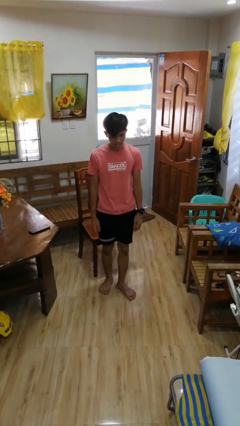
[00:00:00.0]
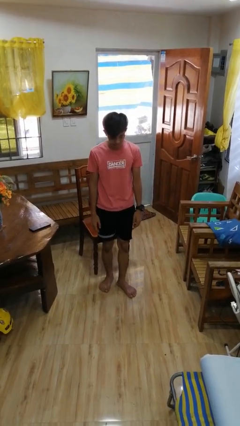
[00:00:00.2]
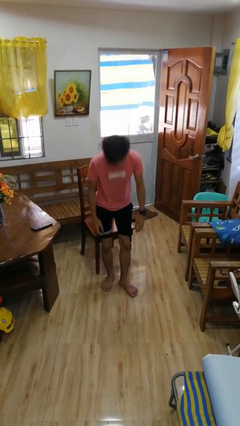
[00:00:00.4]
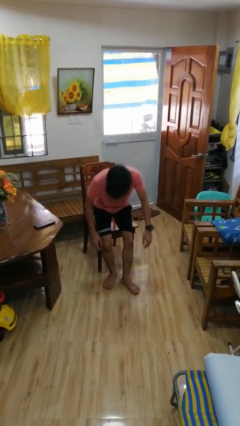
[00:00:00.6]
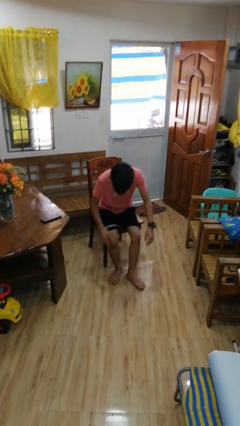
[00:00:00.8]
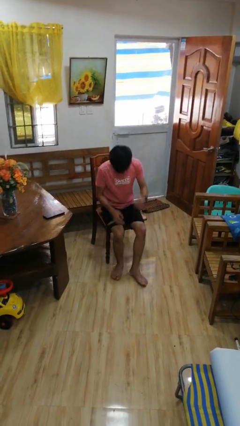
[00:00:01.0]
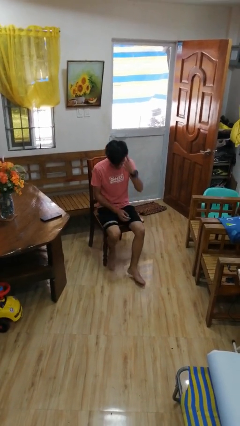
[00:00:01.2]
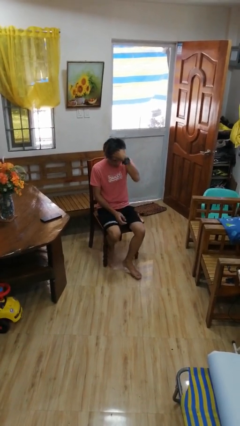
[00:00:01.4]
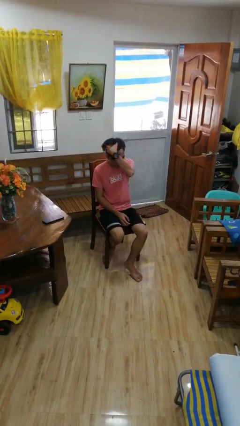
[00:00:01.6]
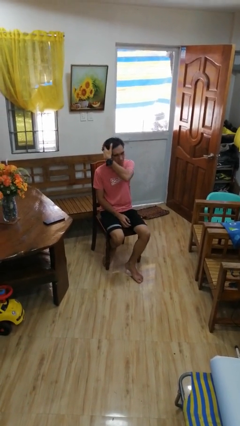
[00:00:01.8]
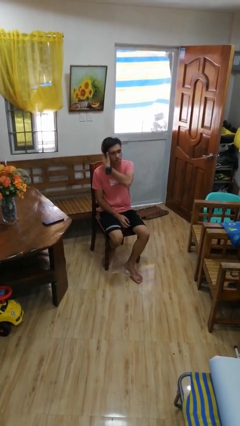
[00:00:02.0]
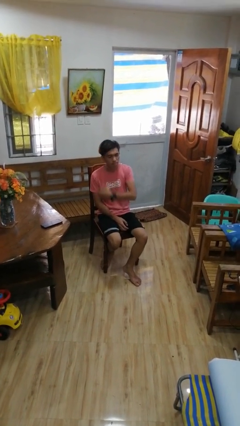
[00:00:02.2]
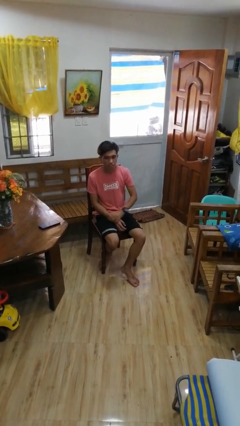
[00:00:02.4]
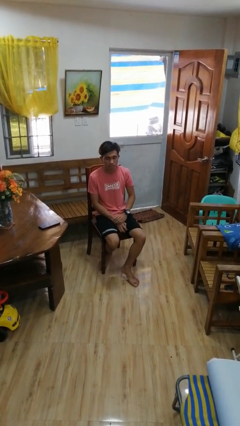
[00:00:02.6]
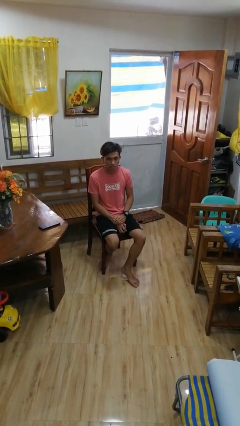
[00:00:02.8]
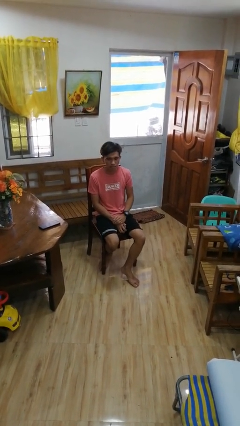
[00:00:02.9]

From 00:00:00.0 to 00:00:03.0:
person sits down

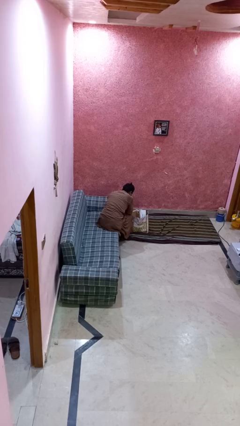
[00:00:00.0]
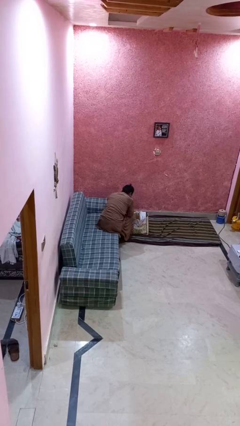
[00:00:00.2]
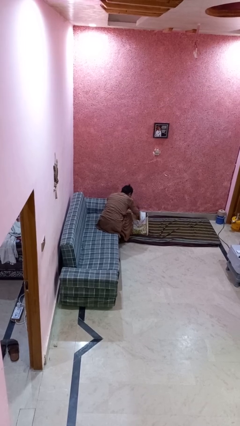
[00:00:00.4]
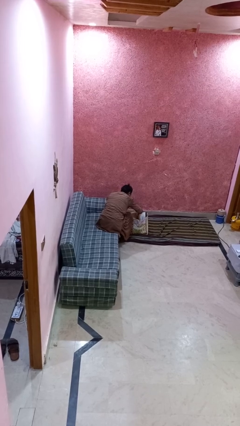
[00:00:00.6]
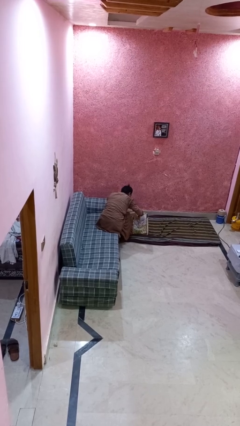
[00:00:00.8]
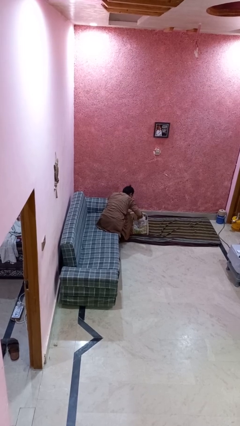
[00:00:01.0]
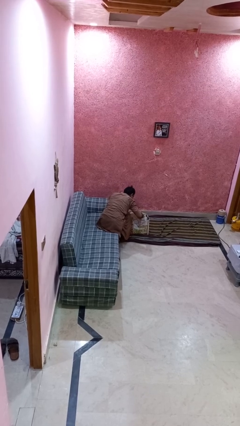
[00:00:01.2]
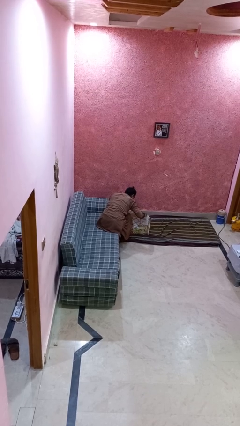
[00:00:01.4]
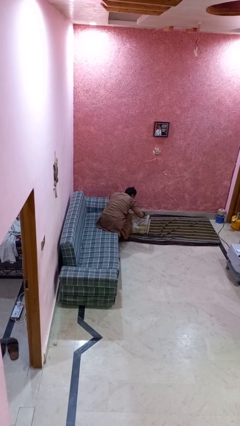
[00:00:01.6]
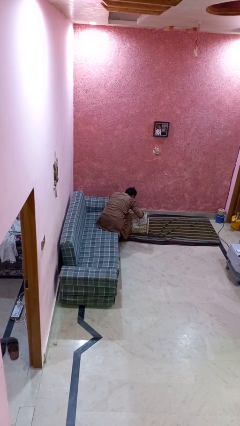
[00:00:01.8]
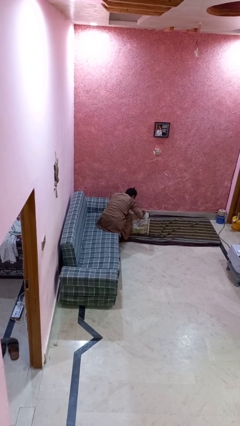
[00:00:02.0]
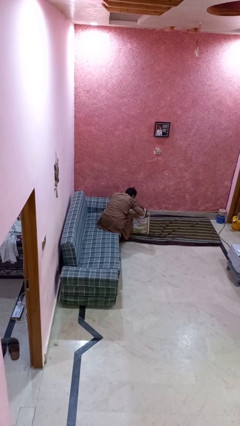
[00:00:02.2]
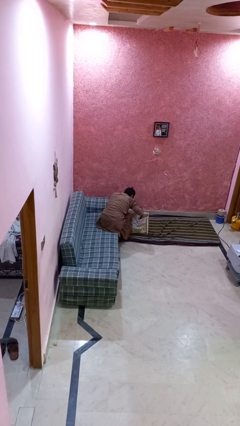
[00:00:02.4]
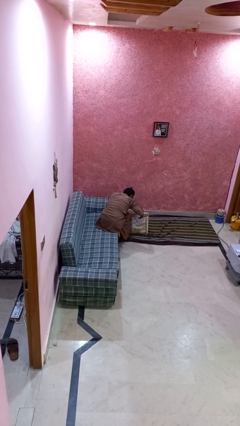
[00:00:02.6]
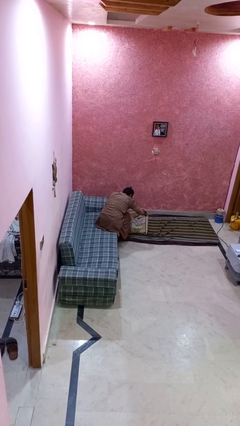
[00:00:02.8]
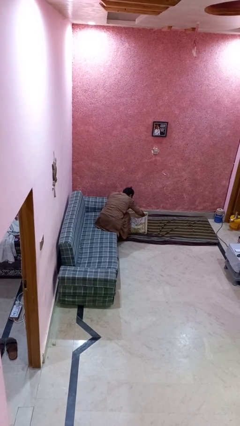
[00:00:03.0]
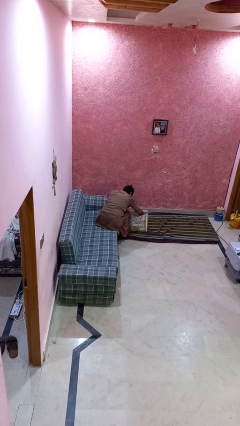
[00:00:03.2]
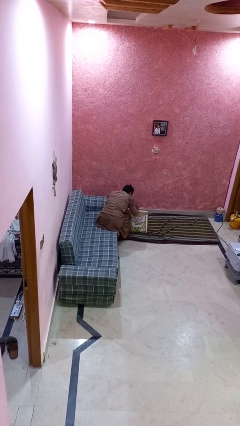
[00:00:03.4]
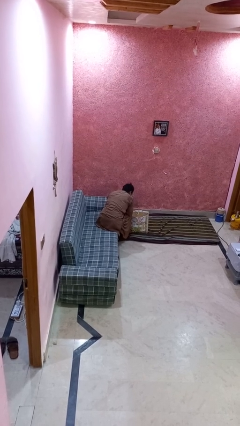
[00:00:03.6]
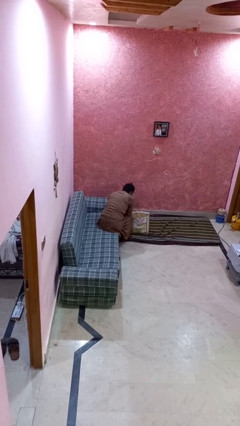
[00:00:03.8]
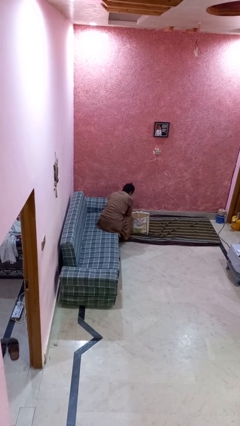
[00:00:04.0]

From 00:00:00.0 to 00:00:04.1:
person searches in bag

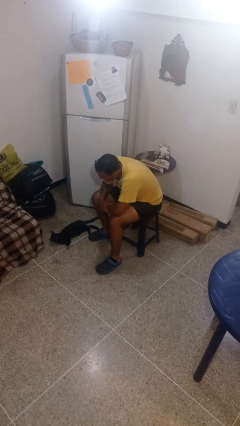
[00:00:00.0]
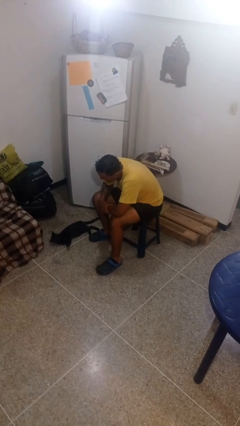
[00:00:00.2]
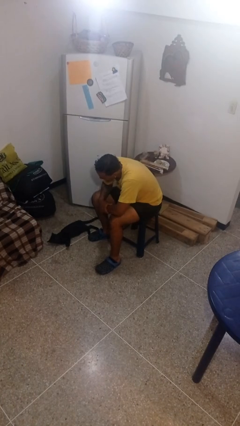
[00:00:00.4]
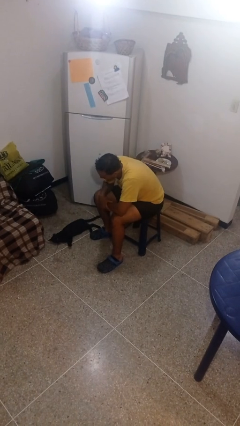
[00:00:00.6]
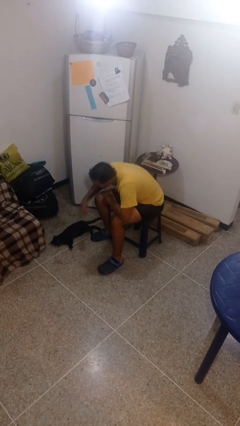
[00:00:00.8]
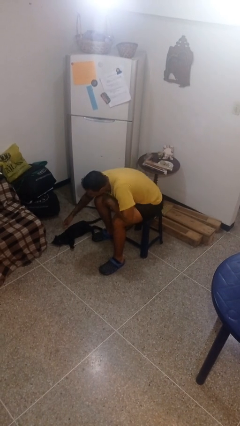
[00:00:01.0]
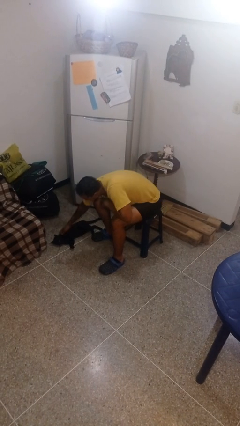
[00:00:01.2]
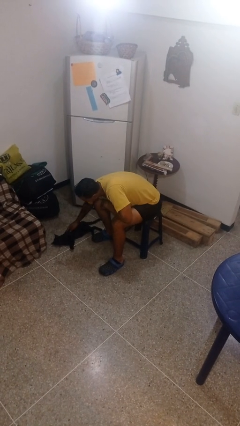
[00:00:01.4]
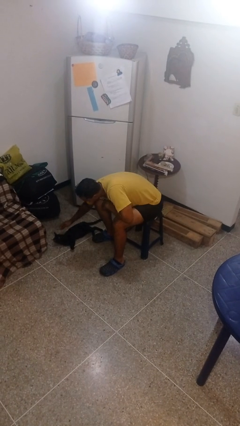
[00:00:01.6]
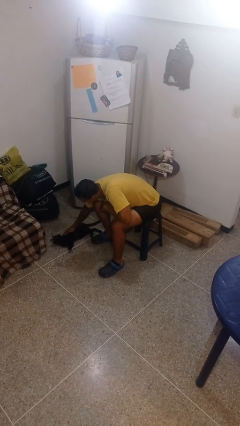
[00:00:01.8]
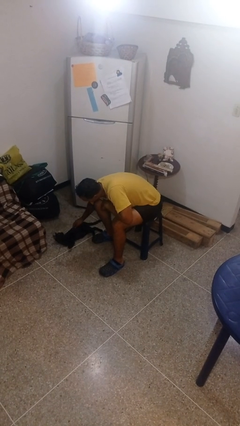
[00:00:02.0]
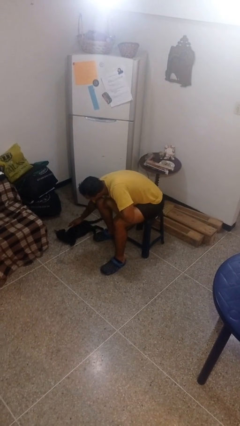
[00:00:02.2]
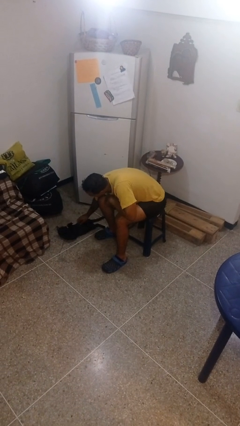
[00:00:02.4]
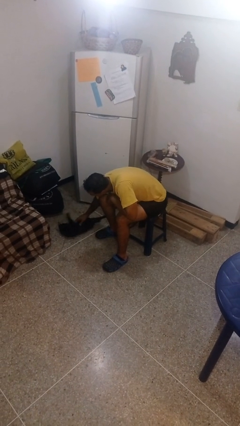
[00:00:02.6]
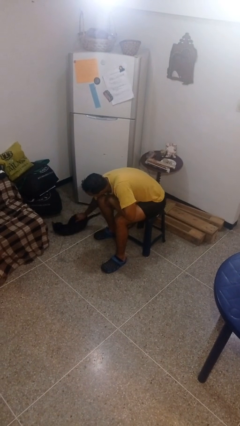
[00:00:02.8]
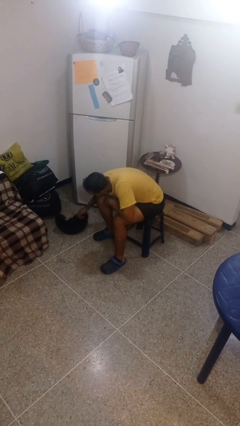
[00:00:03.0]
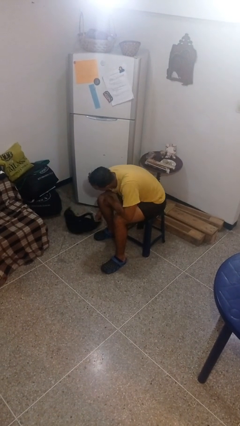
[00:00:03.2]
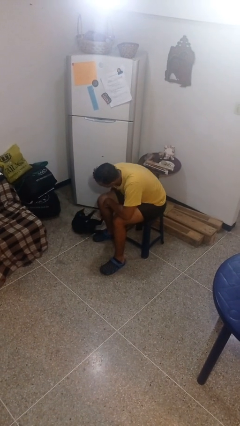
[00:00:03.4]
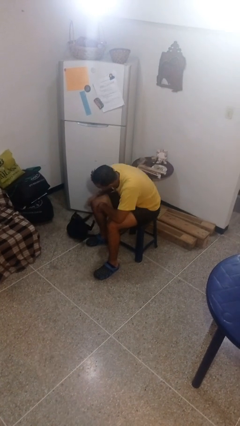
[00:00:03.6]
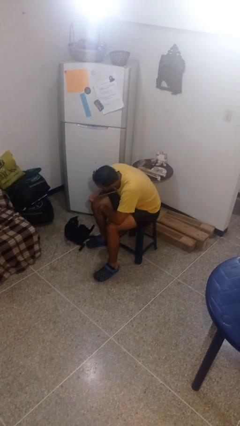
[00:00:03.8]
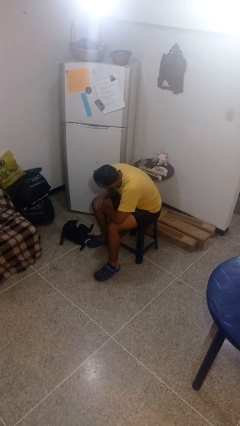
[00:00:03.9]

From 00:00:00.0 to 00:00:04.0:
person pets cat

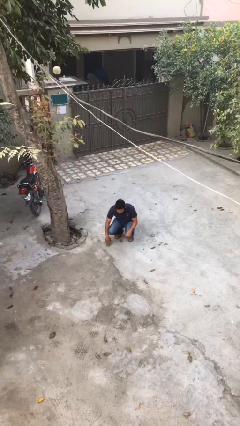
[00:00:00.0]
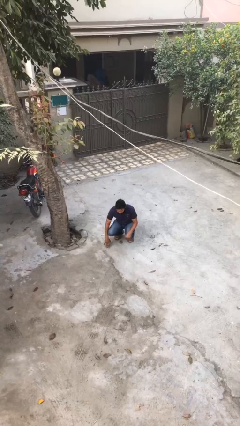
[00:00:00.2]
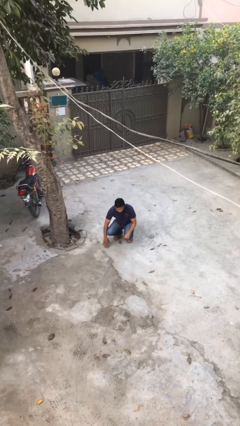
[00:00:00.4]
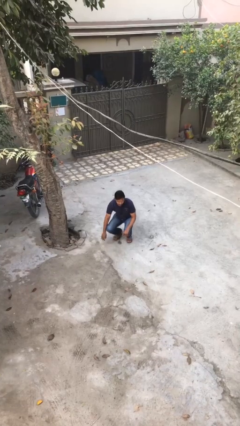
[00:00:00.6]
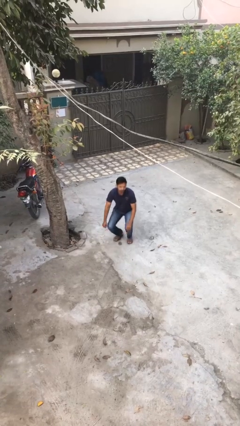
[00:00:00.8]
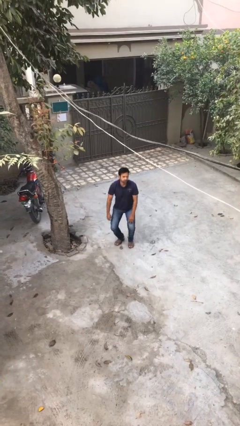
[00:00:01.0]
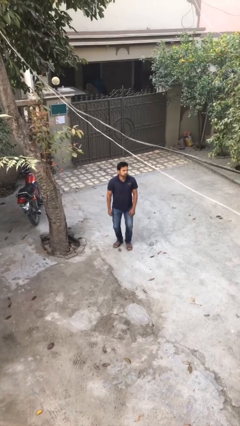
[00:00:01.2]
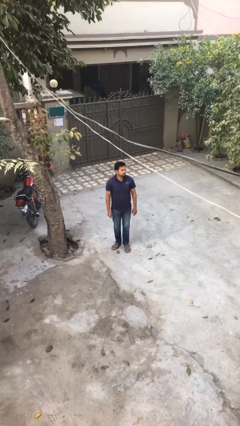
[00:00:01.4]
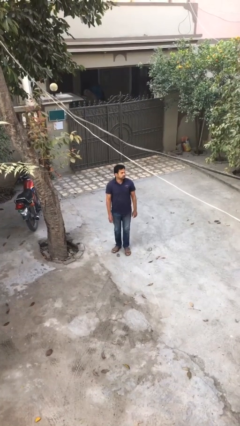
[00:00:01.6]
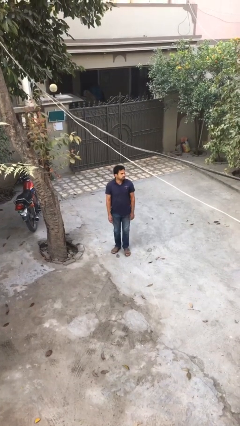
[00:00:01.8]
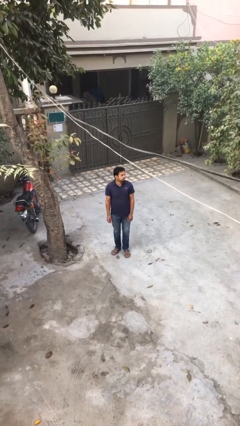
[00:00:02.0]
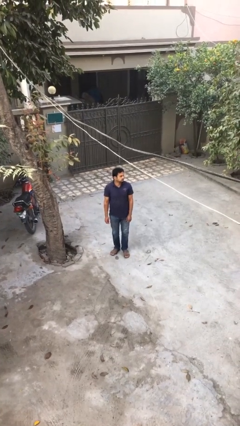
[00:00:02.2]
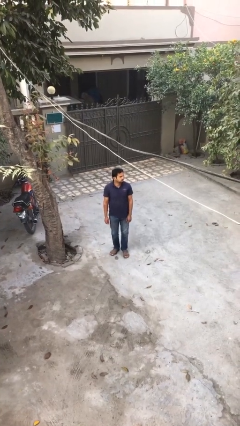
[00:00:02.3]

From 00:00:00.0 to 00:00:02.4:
person stands up

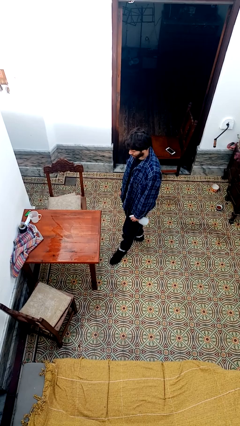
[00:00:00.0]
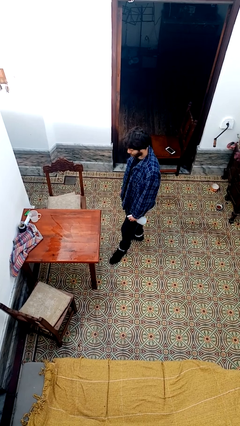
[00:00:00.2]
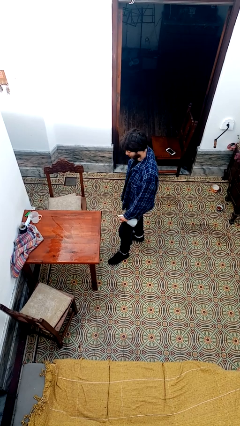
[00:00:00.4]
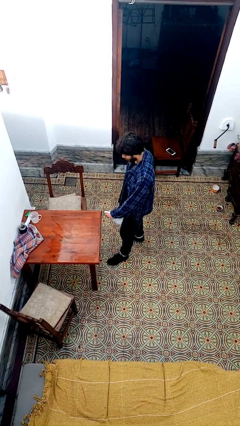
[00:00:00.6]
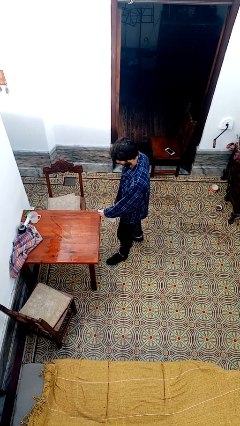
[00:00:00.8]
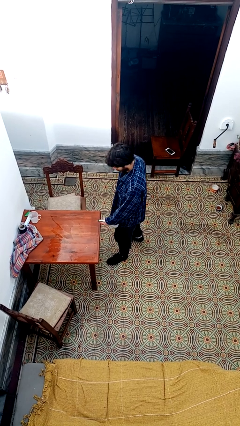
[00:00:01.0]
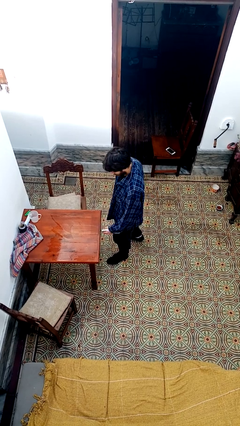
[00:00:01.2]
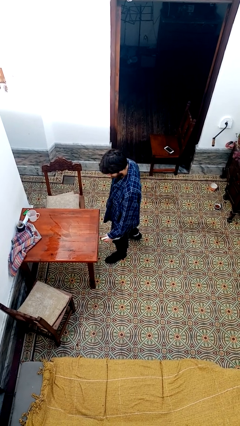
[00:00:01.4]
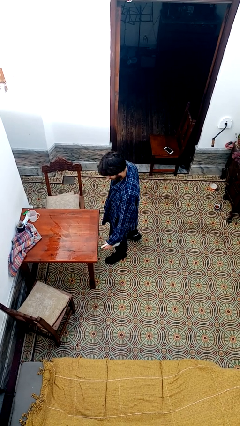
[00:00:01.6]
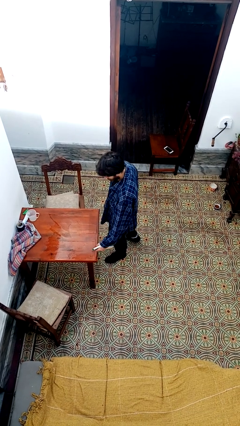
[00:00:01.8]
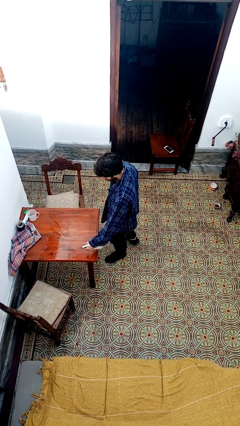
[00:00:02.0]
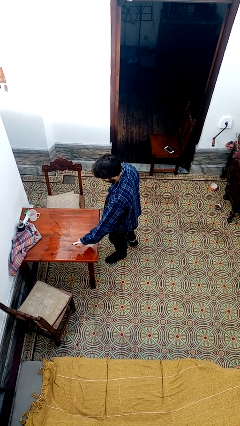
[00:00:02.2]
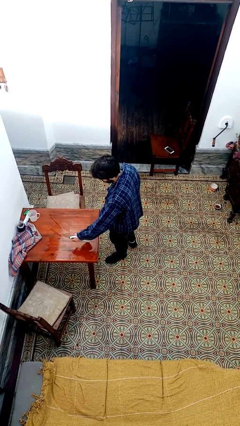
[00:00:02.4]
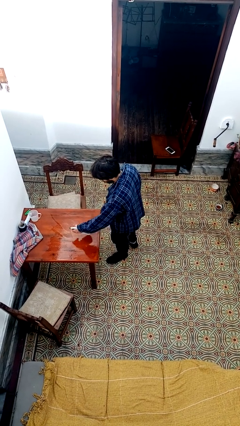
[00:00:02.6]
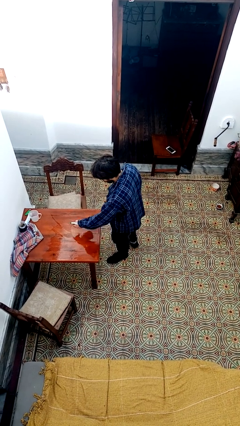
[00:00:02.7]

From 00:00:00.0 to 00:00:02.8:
person sprays from bottle

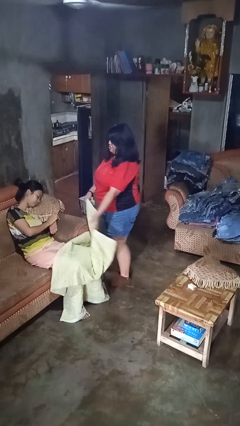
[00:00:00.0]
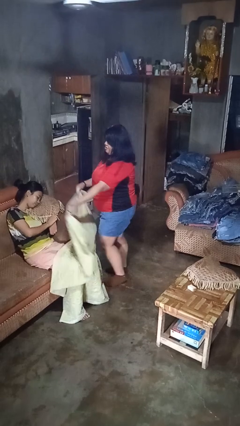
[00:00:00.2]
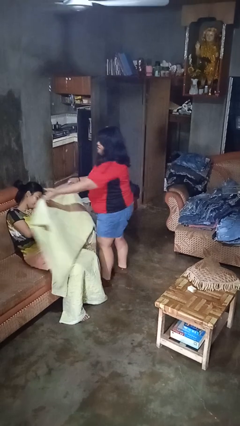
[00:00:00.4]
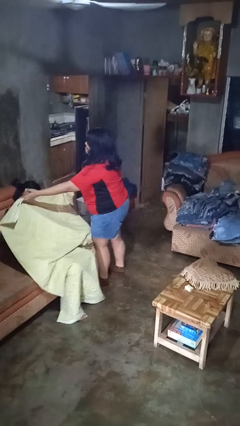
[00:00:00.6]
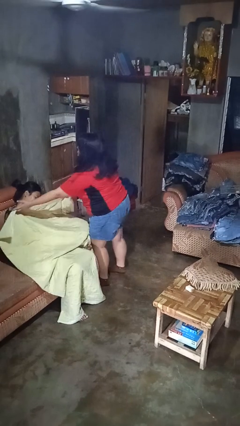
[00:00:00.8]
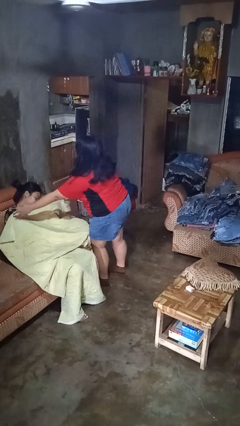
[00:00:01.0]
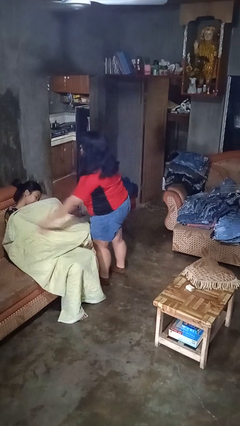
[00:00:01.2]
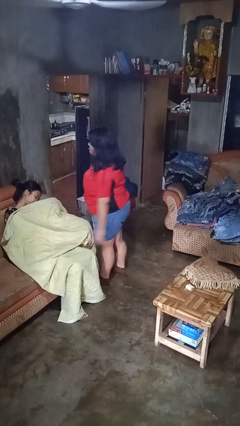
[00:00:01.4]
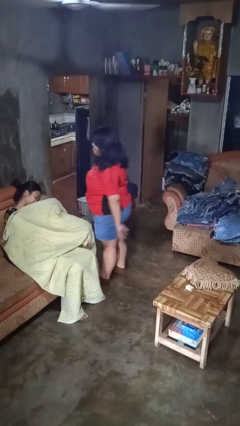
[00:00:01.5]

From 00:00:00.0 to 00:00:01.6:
person covers friend with blanket
